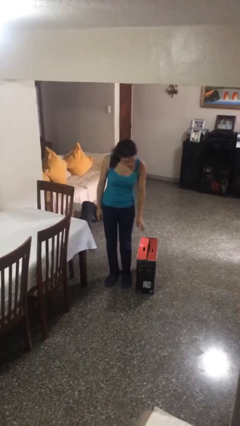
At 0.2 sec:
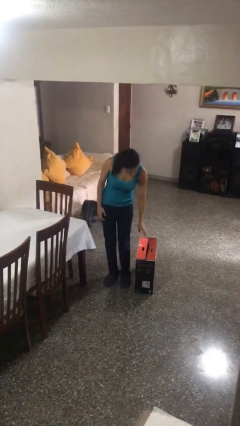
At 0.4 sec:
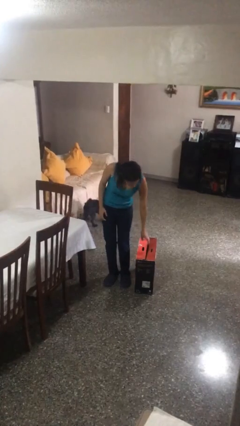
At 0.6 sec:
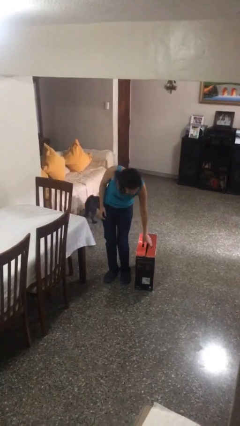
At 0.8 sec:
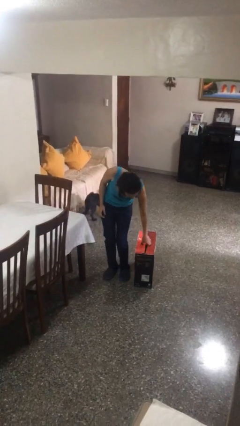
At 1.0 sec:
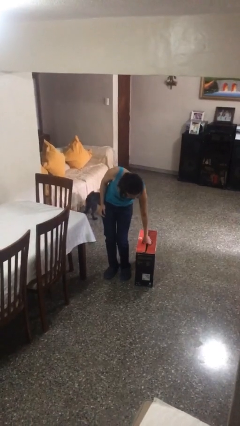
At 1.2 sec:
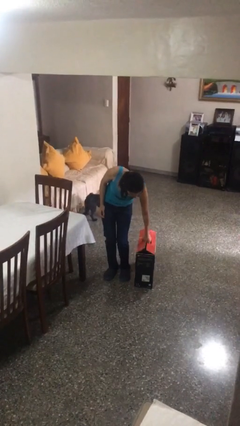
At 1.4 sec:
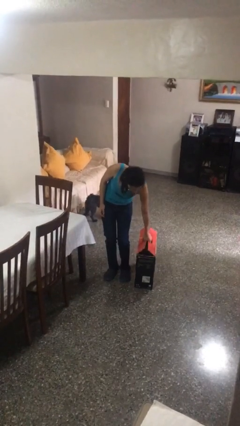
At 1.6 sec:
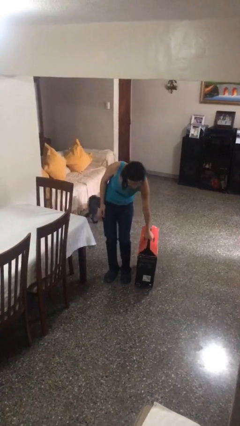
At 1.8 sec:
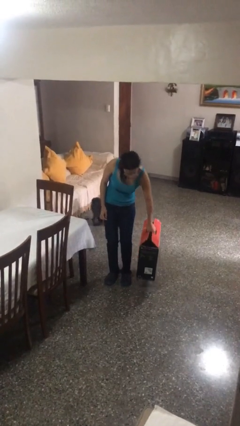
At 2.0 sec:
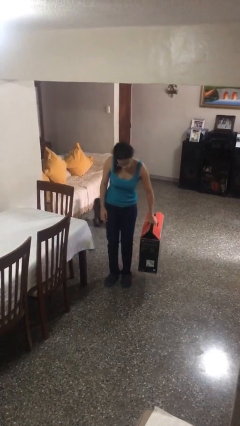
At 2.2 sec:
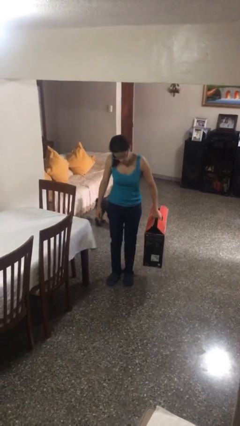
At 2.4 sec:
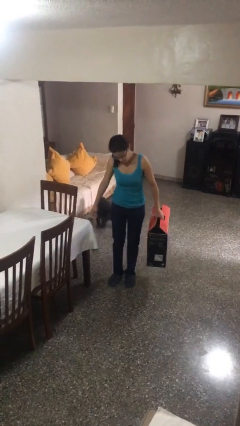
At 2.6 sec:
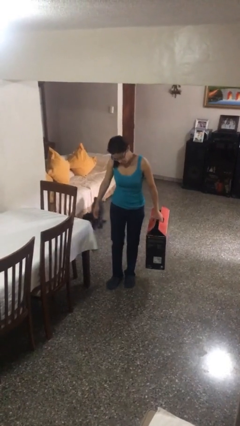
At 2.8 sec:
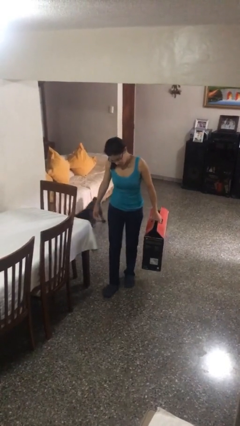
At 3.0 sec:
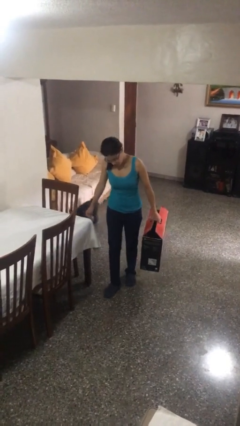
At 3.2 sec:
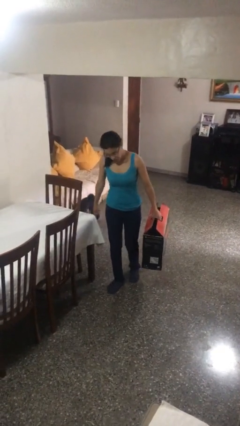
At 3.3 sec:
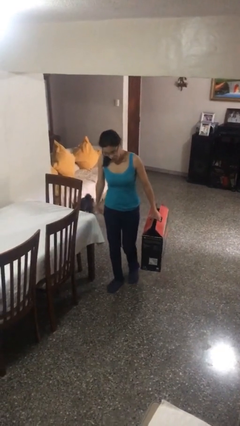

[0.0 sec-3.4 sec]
person picks up object from floor

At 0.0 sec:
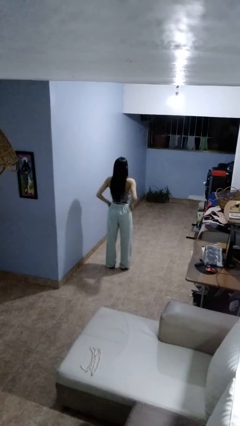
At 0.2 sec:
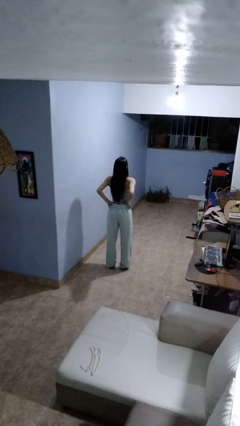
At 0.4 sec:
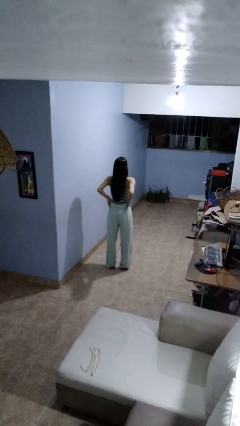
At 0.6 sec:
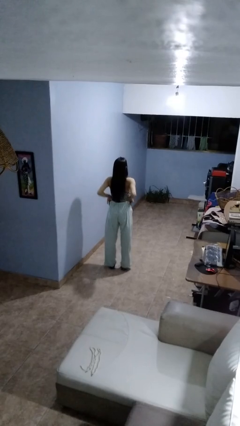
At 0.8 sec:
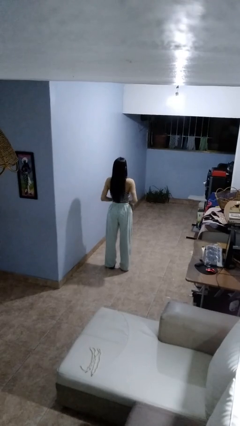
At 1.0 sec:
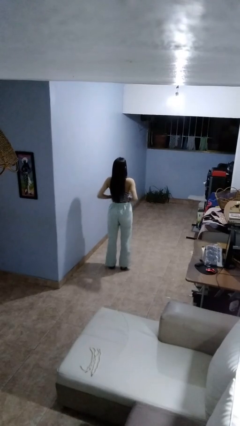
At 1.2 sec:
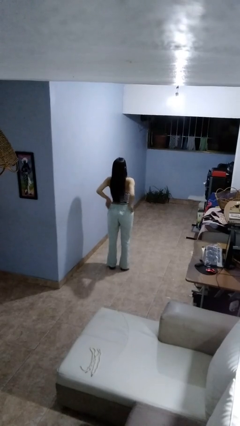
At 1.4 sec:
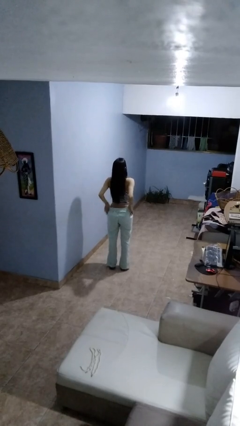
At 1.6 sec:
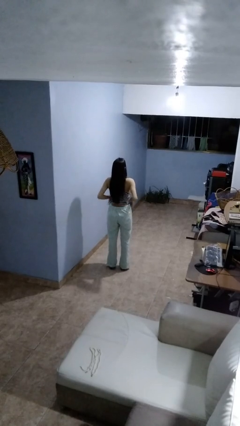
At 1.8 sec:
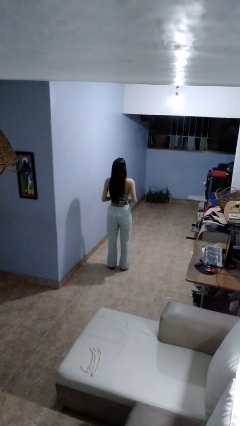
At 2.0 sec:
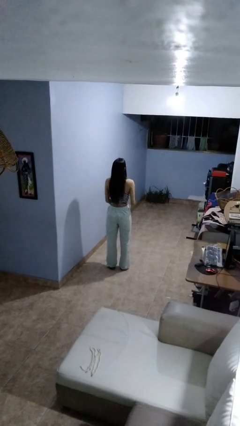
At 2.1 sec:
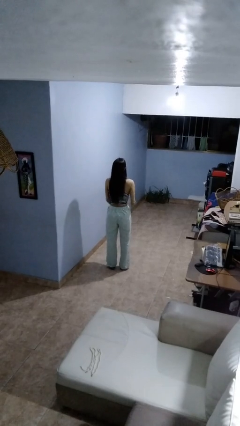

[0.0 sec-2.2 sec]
person hikes up pants

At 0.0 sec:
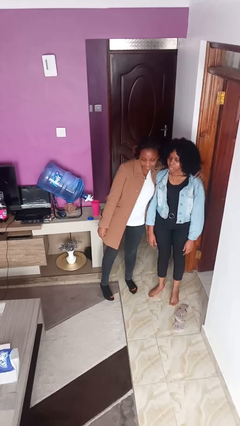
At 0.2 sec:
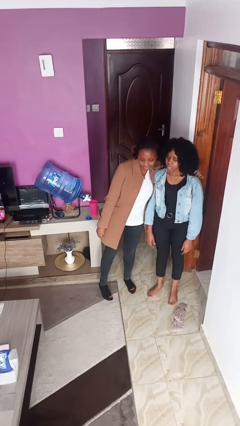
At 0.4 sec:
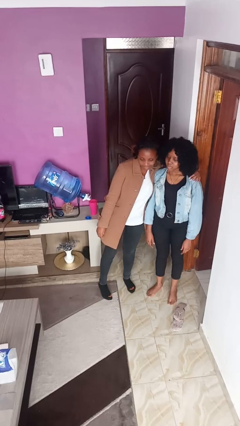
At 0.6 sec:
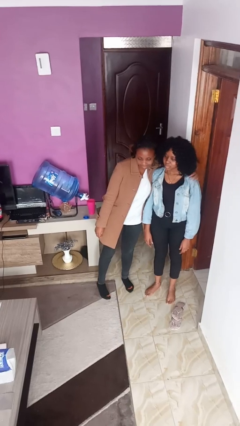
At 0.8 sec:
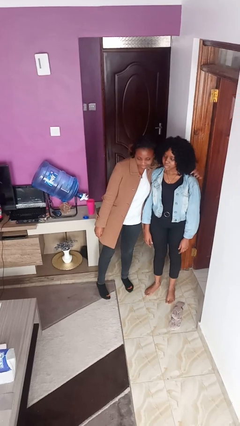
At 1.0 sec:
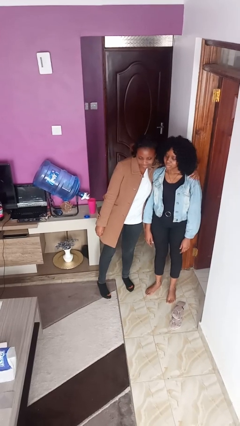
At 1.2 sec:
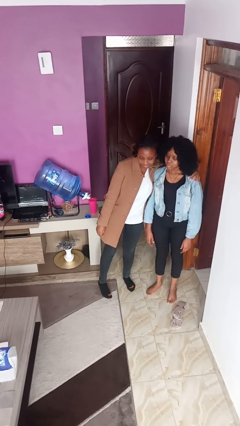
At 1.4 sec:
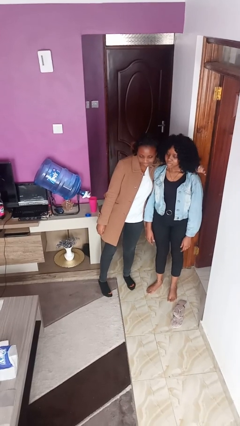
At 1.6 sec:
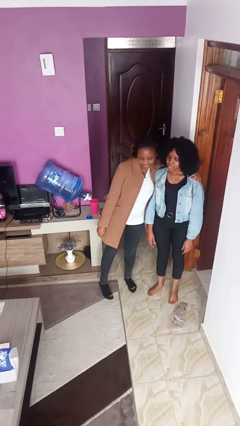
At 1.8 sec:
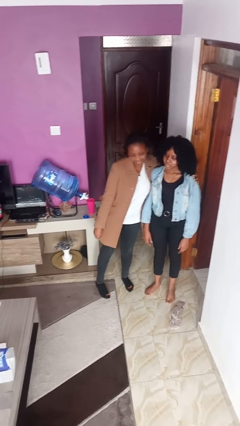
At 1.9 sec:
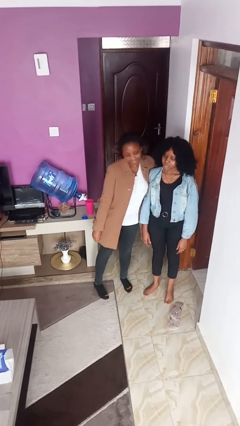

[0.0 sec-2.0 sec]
person pounds shoulders of person

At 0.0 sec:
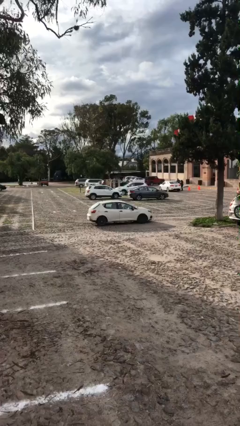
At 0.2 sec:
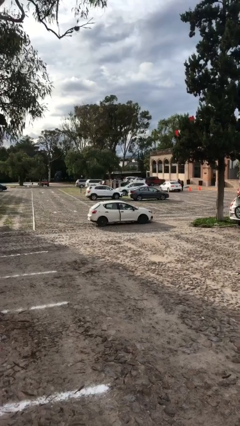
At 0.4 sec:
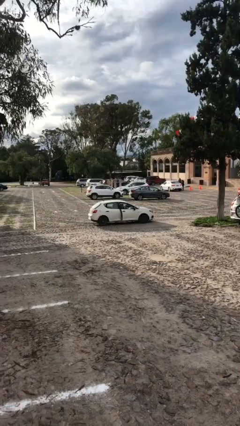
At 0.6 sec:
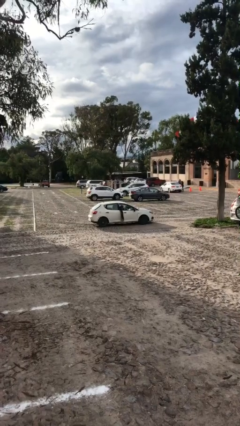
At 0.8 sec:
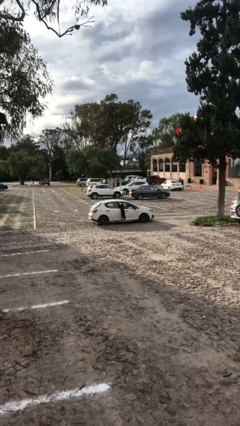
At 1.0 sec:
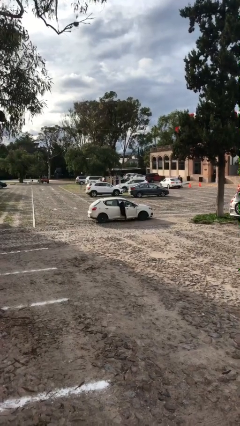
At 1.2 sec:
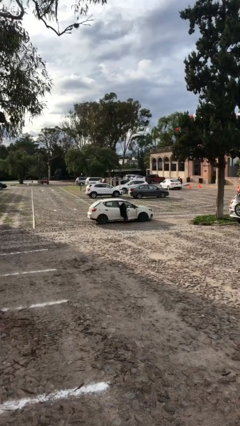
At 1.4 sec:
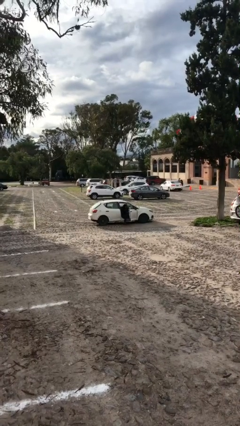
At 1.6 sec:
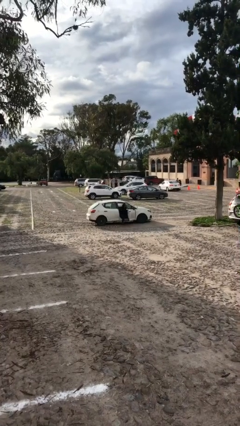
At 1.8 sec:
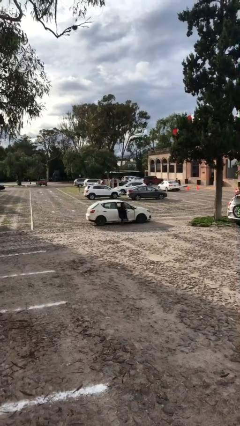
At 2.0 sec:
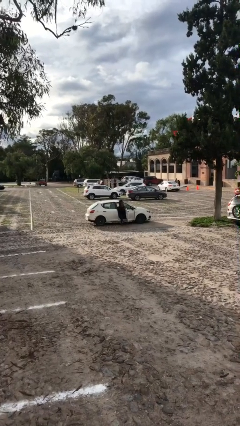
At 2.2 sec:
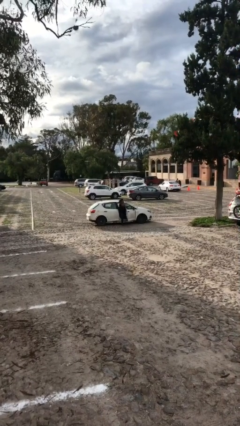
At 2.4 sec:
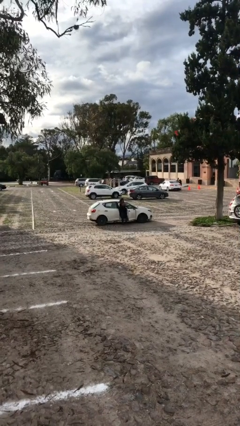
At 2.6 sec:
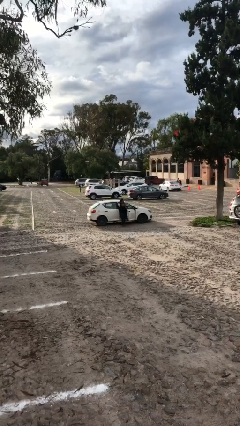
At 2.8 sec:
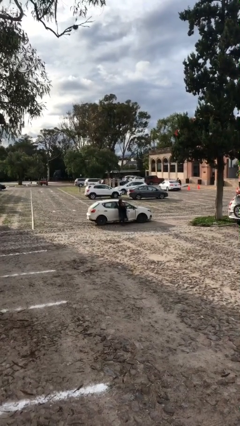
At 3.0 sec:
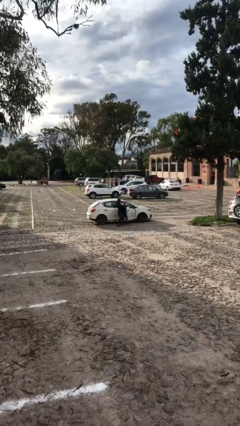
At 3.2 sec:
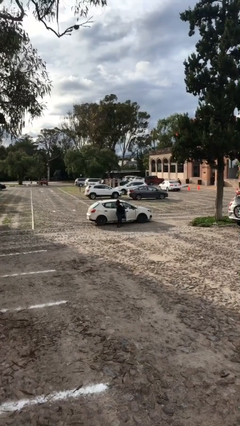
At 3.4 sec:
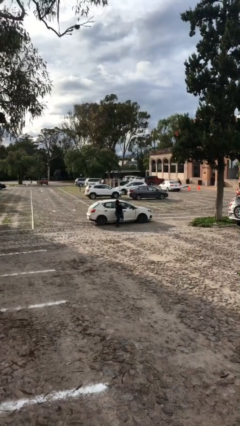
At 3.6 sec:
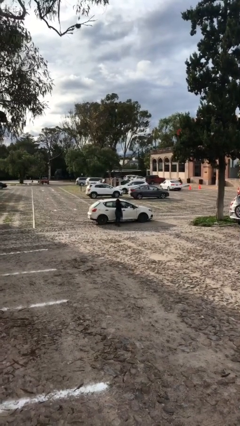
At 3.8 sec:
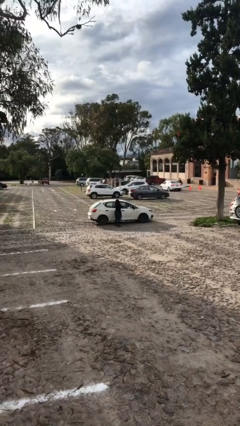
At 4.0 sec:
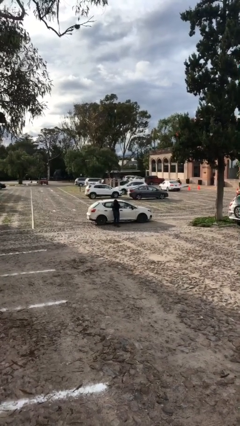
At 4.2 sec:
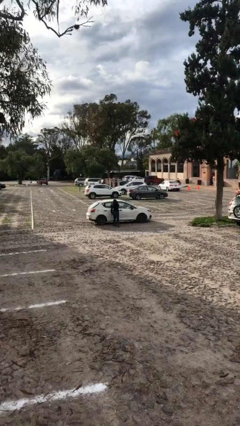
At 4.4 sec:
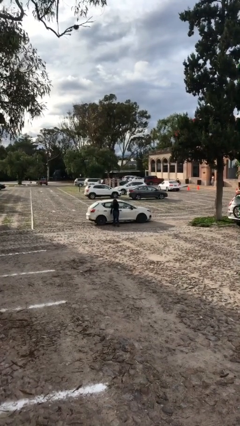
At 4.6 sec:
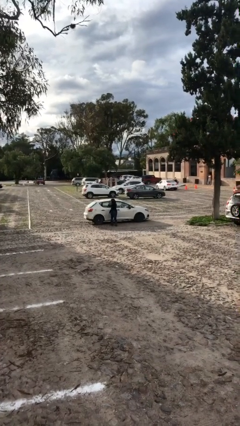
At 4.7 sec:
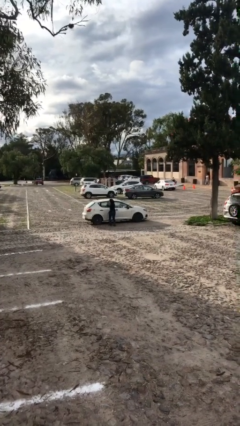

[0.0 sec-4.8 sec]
car drops off person

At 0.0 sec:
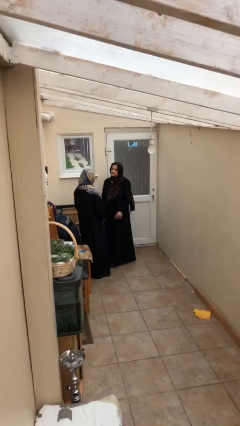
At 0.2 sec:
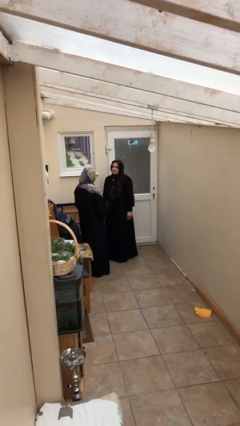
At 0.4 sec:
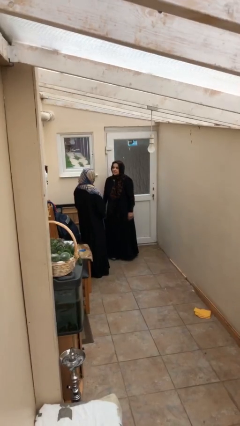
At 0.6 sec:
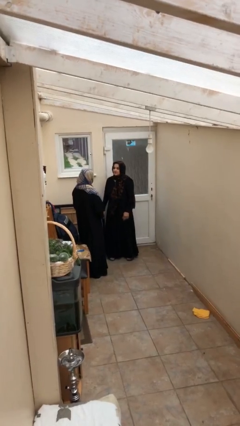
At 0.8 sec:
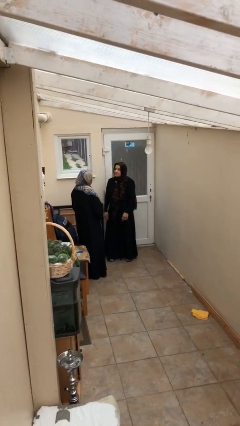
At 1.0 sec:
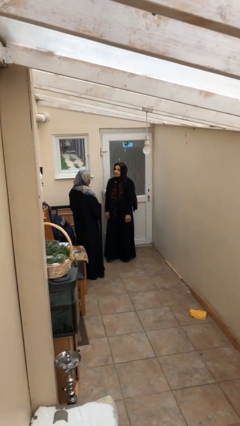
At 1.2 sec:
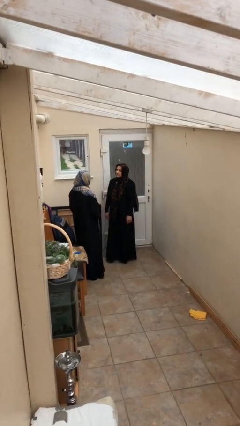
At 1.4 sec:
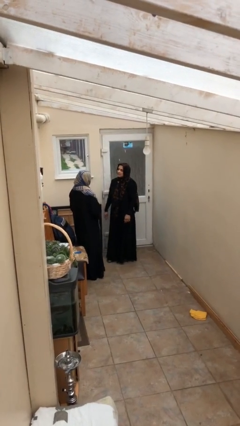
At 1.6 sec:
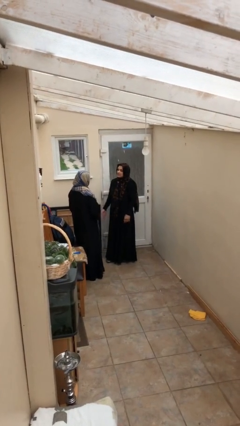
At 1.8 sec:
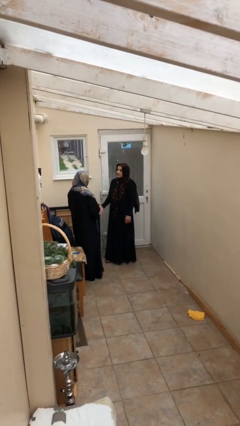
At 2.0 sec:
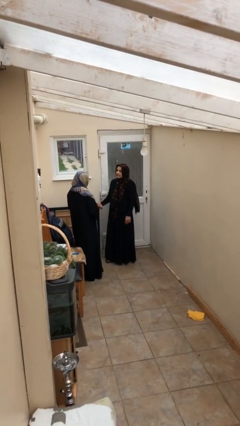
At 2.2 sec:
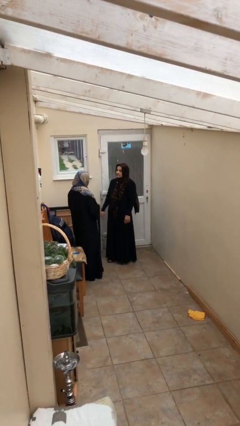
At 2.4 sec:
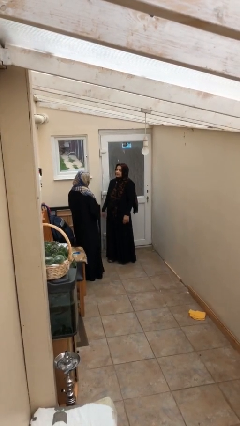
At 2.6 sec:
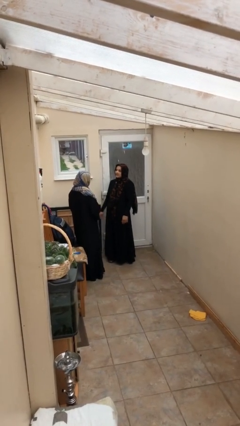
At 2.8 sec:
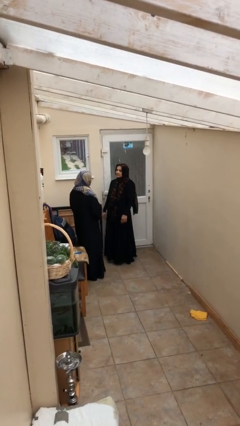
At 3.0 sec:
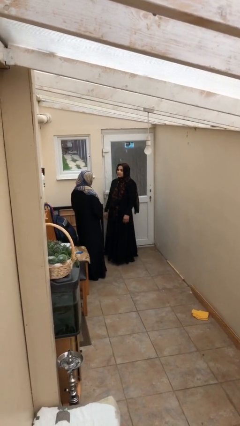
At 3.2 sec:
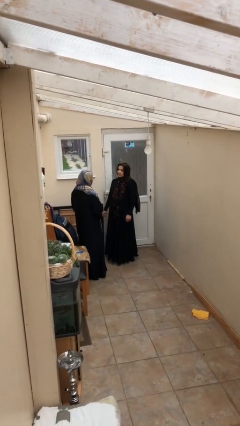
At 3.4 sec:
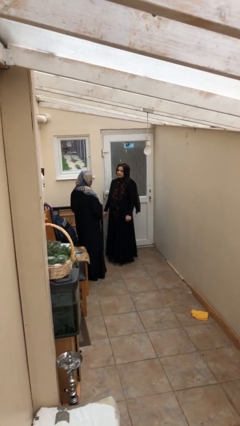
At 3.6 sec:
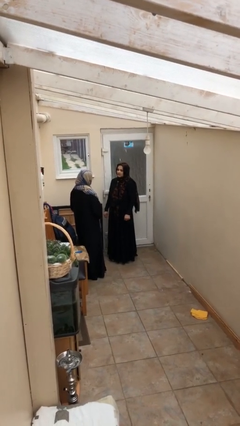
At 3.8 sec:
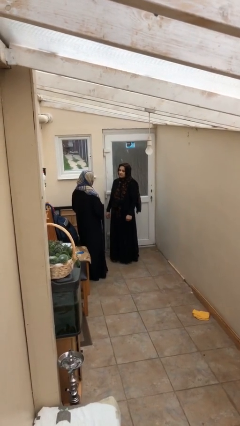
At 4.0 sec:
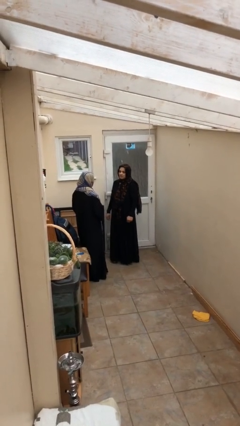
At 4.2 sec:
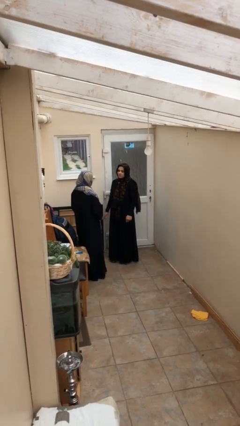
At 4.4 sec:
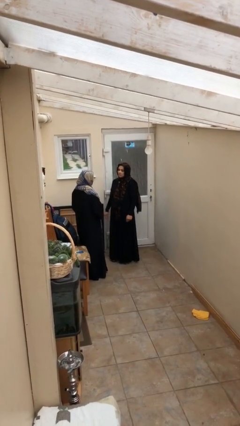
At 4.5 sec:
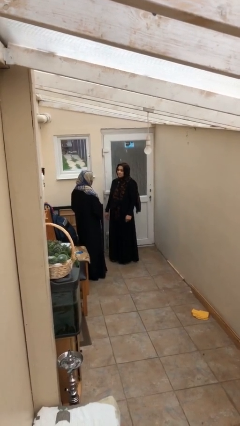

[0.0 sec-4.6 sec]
person talks to person
